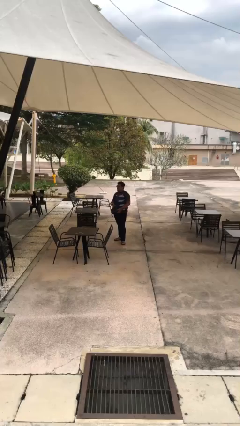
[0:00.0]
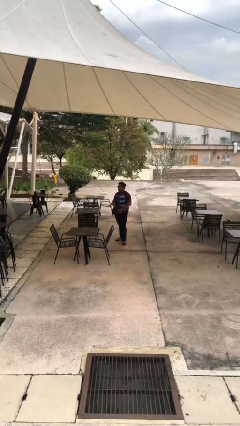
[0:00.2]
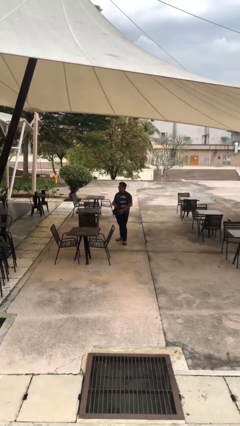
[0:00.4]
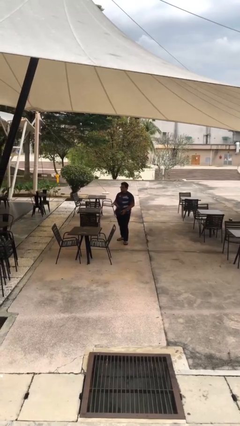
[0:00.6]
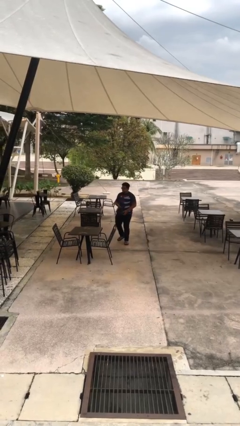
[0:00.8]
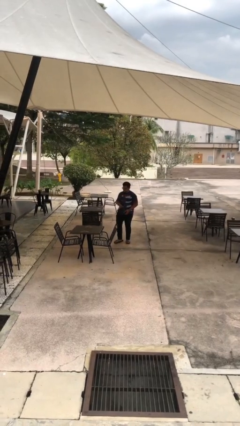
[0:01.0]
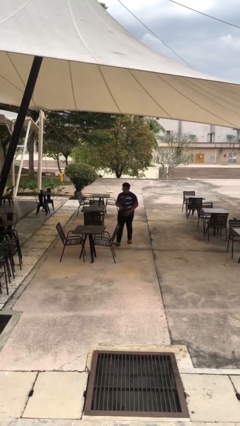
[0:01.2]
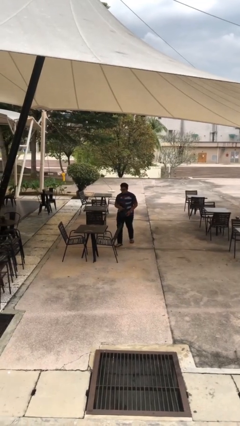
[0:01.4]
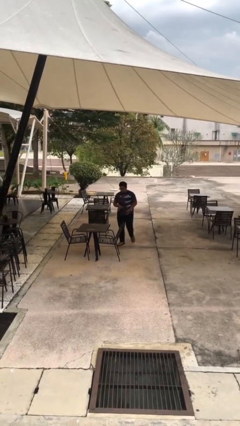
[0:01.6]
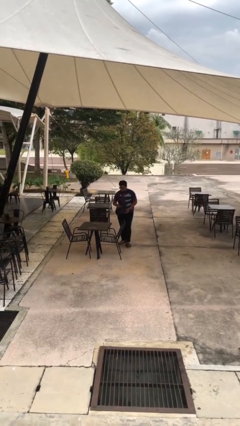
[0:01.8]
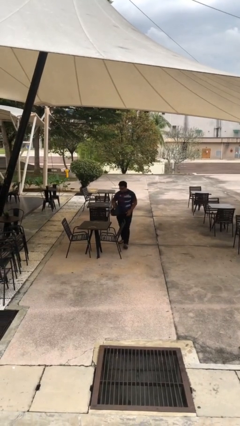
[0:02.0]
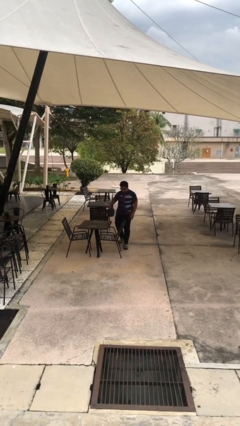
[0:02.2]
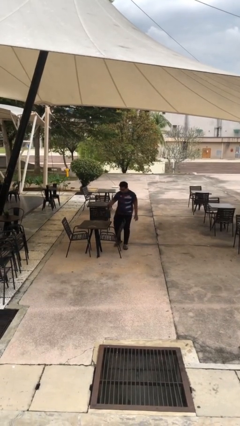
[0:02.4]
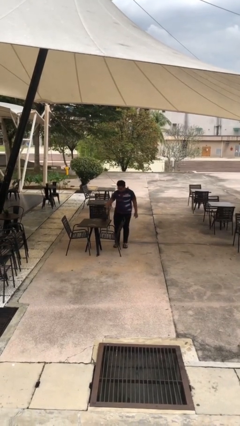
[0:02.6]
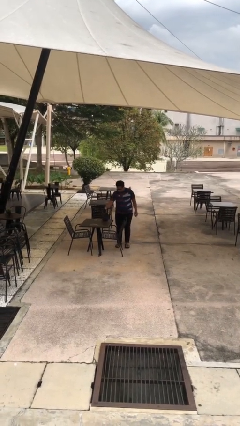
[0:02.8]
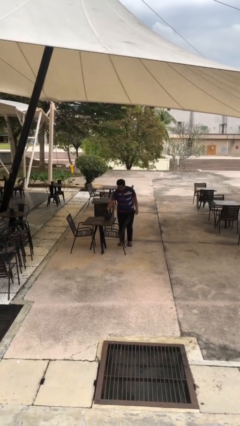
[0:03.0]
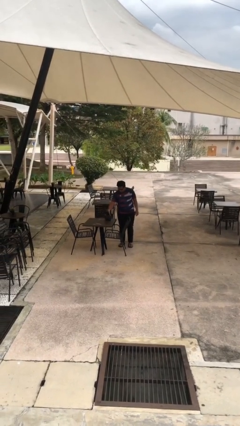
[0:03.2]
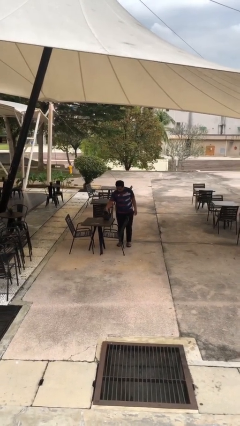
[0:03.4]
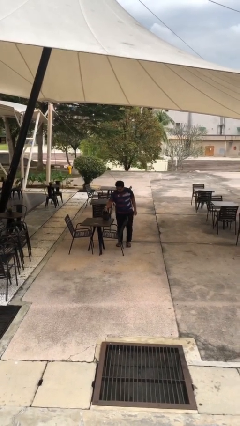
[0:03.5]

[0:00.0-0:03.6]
person puts down object on table

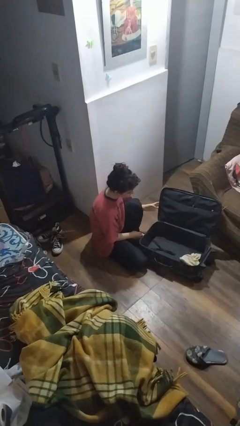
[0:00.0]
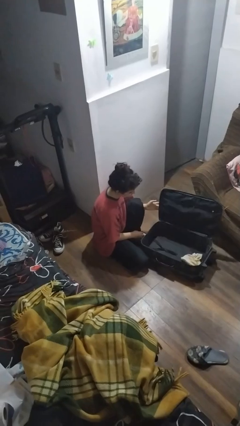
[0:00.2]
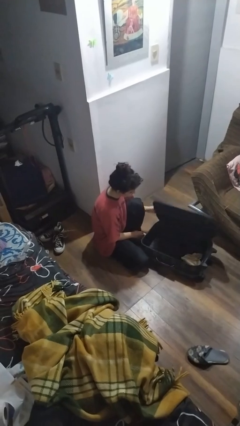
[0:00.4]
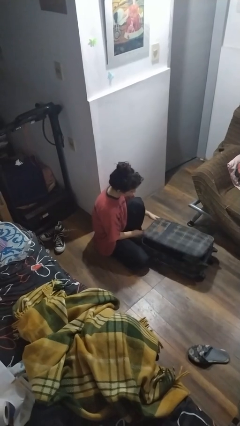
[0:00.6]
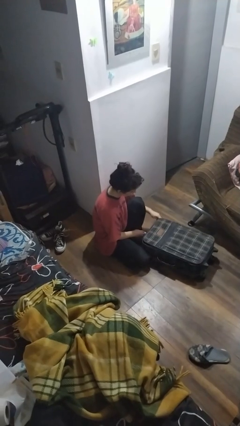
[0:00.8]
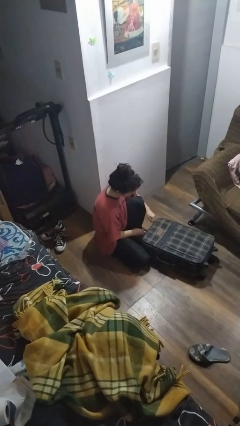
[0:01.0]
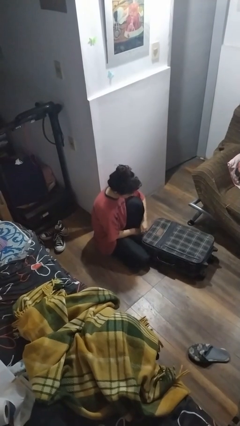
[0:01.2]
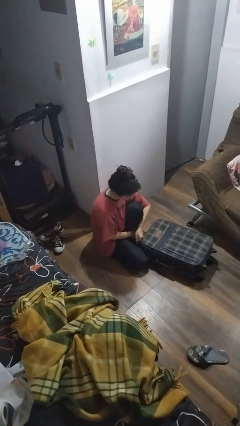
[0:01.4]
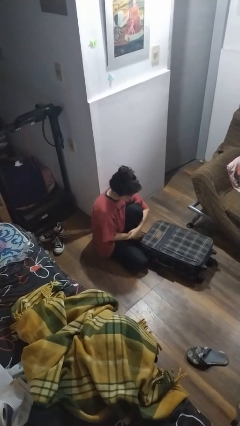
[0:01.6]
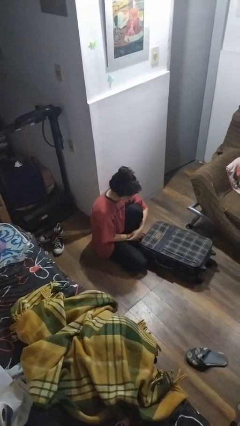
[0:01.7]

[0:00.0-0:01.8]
person closes suitcase

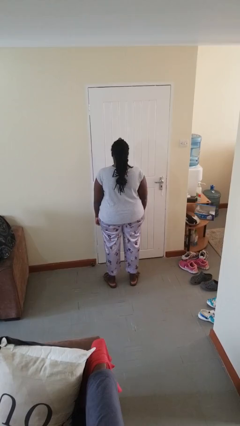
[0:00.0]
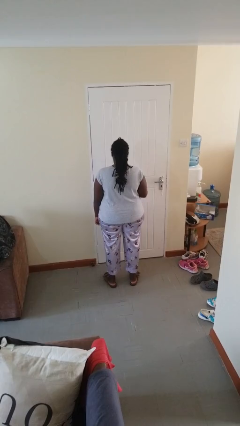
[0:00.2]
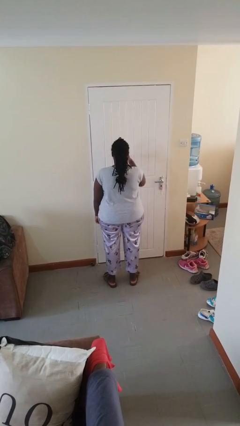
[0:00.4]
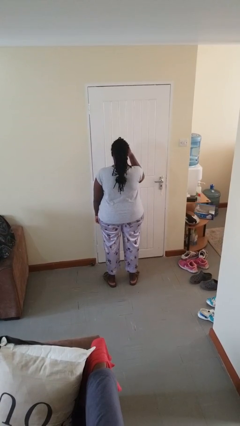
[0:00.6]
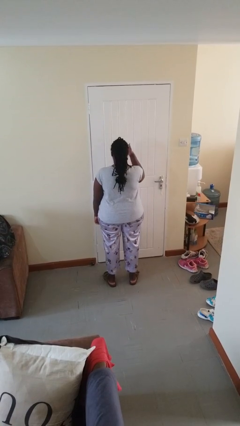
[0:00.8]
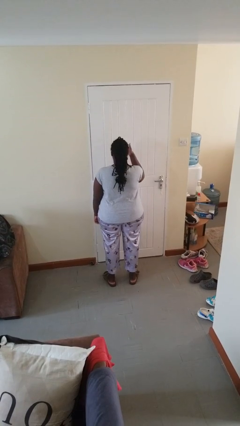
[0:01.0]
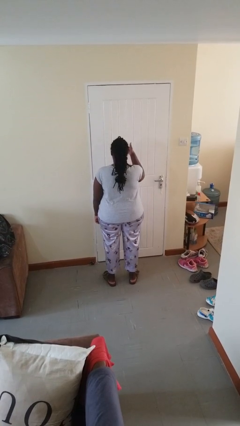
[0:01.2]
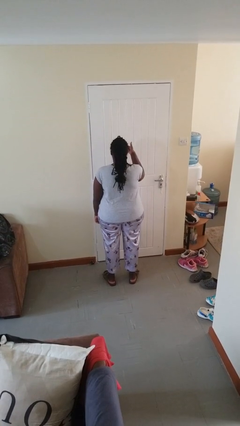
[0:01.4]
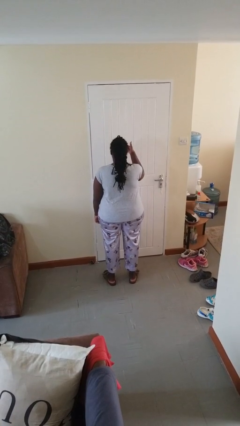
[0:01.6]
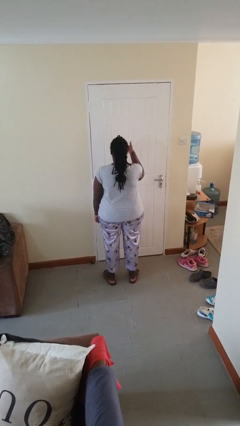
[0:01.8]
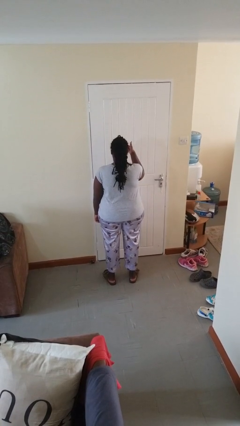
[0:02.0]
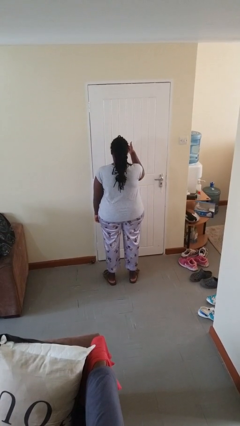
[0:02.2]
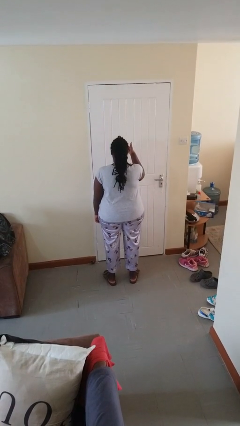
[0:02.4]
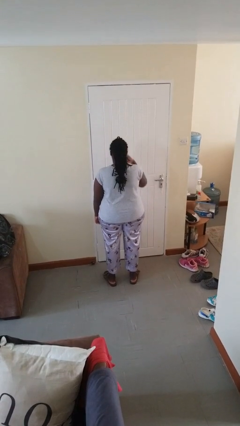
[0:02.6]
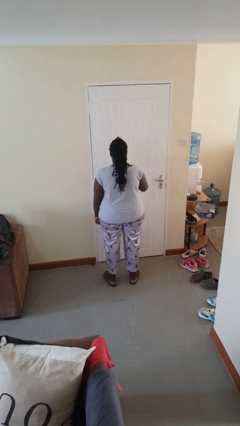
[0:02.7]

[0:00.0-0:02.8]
person gestures thumbs up

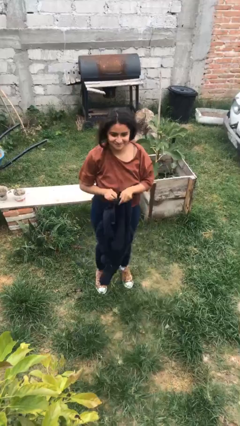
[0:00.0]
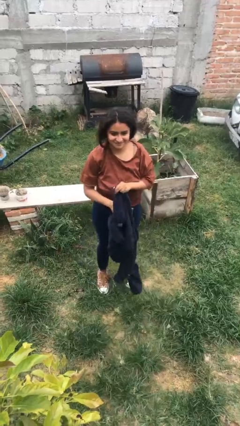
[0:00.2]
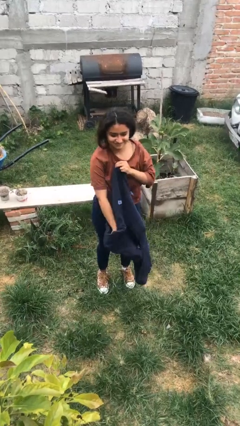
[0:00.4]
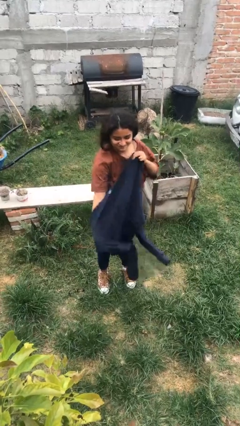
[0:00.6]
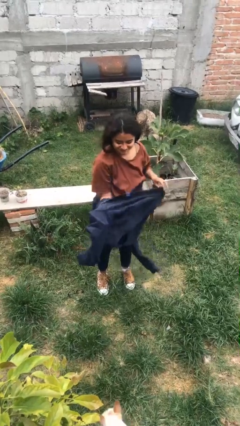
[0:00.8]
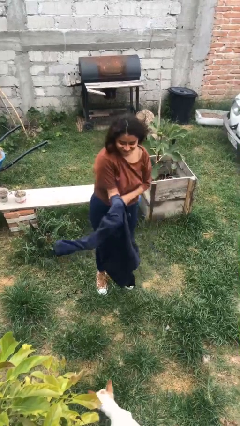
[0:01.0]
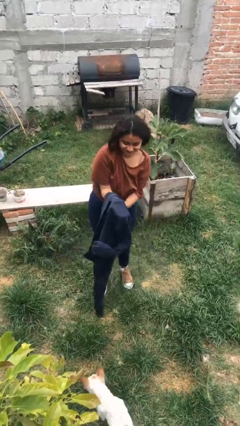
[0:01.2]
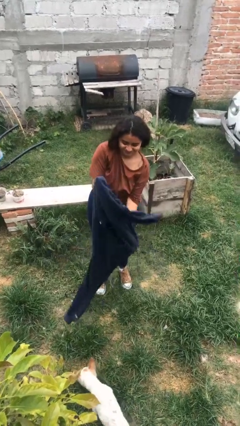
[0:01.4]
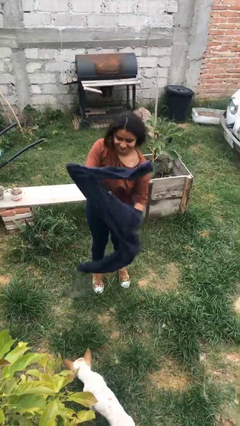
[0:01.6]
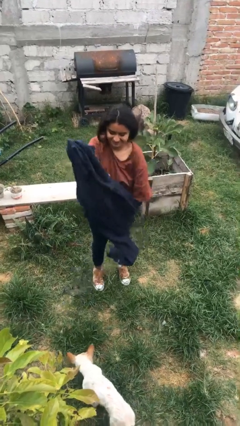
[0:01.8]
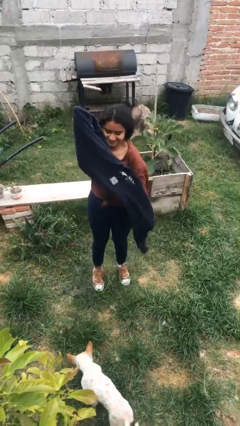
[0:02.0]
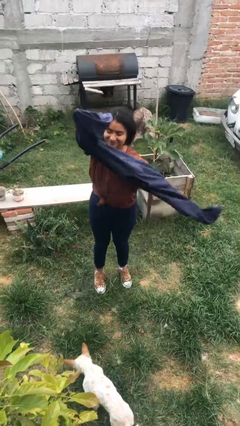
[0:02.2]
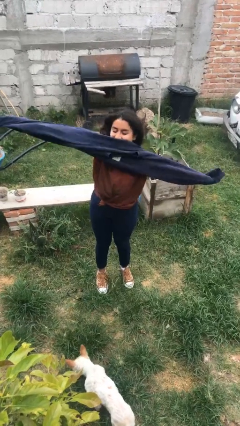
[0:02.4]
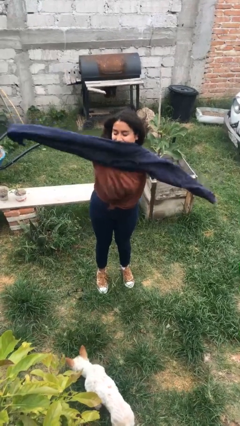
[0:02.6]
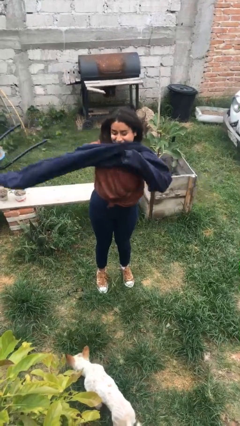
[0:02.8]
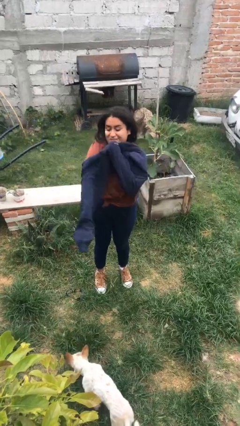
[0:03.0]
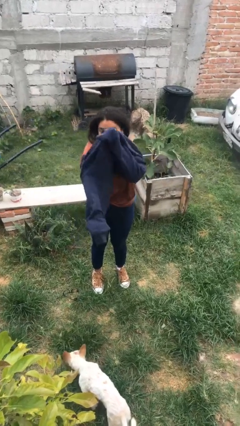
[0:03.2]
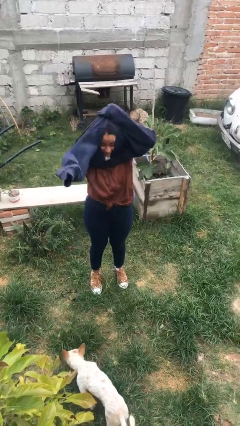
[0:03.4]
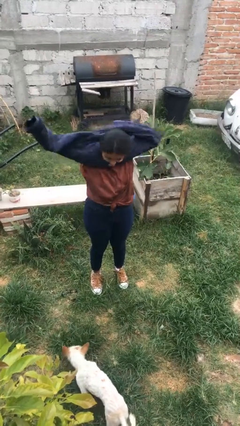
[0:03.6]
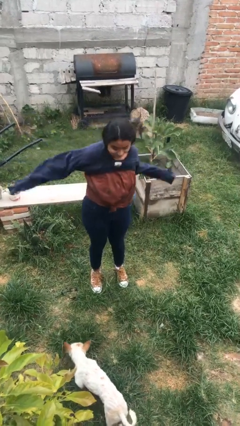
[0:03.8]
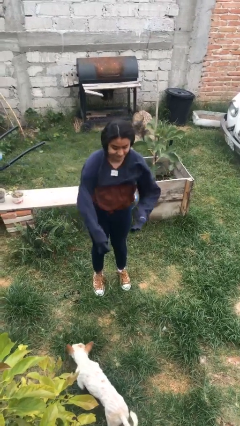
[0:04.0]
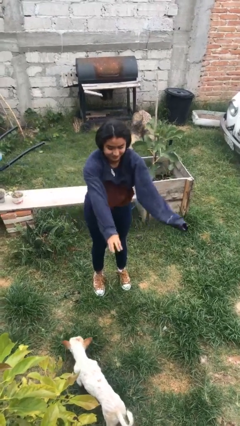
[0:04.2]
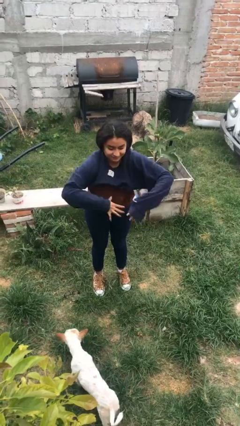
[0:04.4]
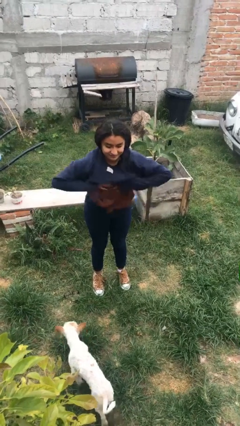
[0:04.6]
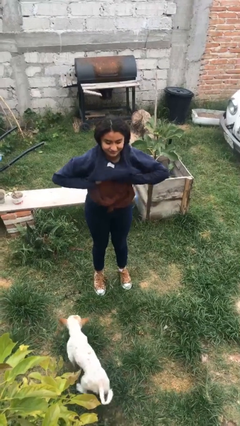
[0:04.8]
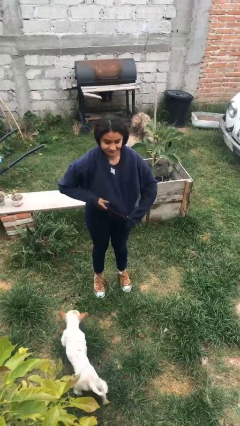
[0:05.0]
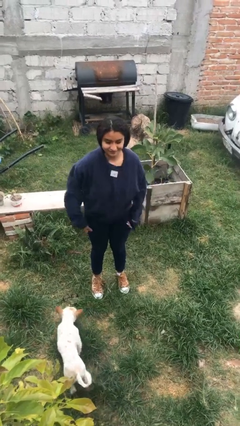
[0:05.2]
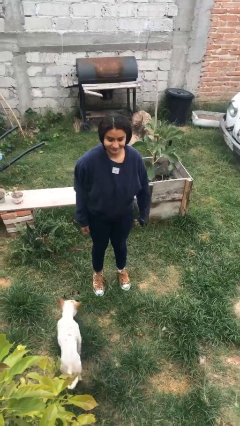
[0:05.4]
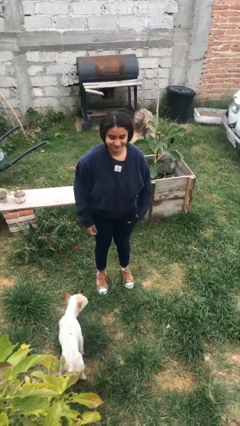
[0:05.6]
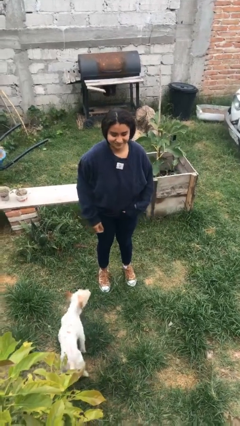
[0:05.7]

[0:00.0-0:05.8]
person puts on shirt

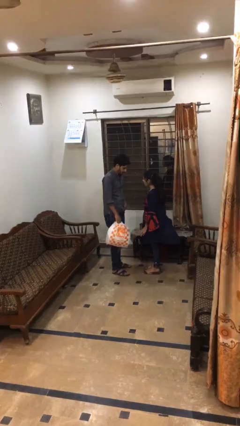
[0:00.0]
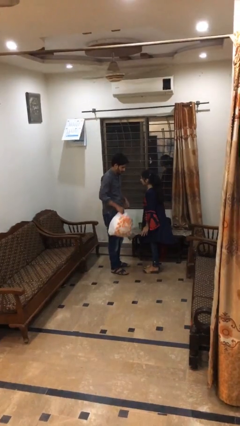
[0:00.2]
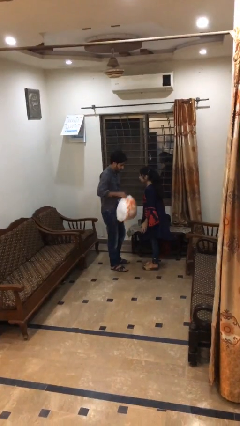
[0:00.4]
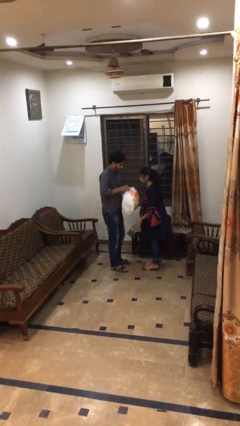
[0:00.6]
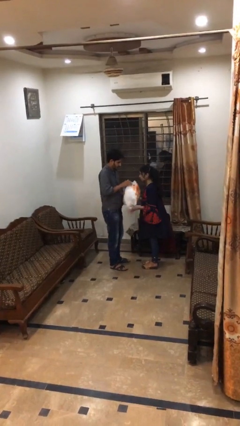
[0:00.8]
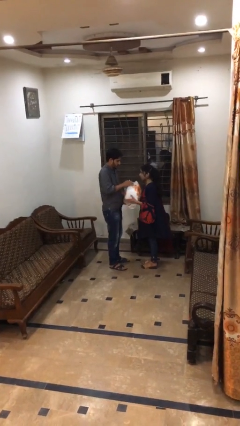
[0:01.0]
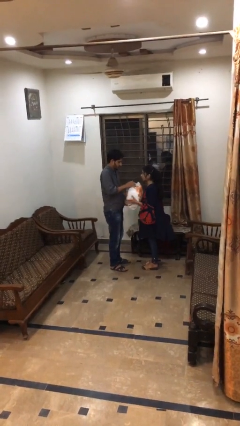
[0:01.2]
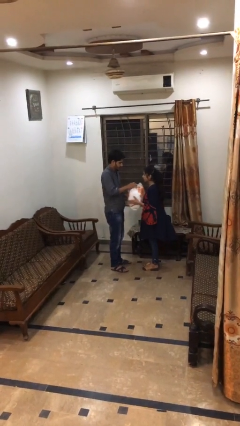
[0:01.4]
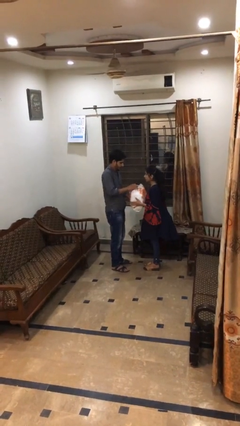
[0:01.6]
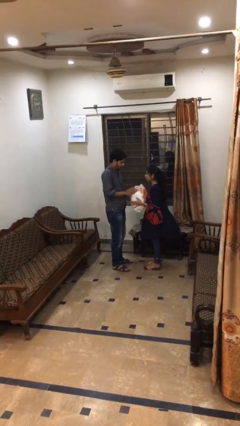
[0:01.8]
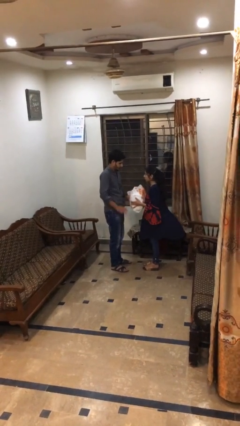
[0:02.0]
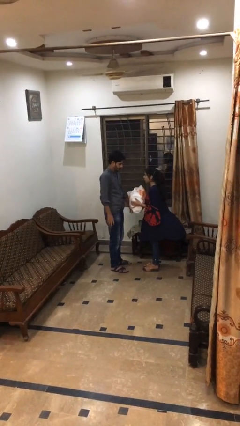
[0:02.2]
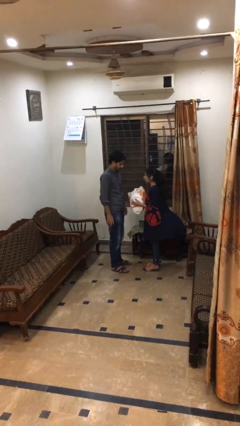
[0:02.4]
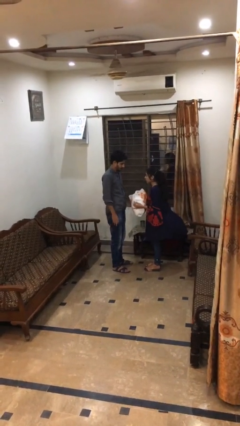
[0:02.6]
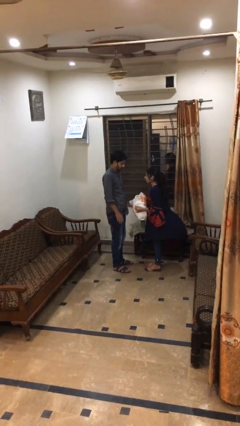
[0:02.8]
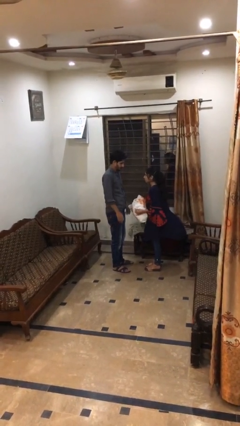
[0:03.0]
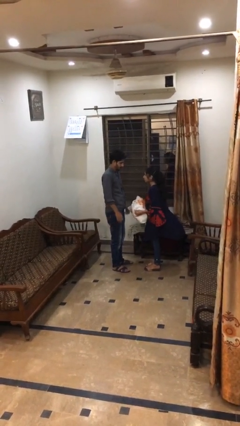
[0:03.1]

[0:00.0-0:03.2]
person transfers object to person

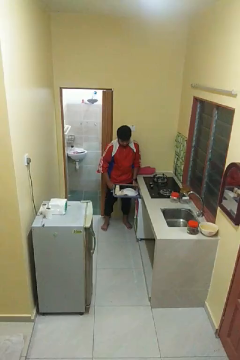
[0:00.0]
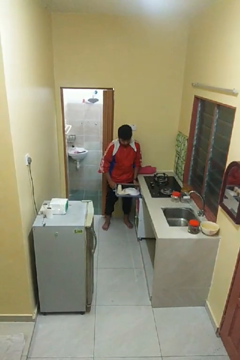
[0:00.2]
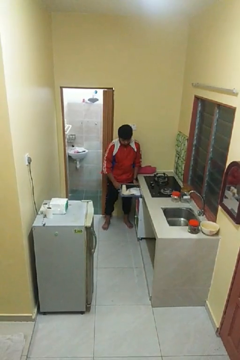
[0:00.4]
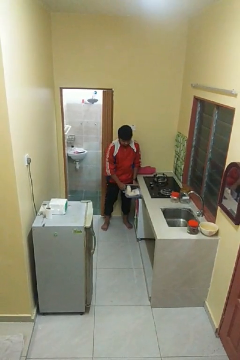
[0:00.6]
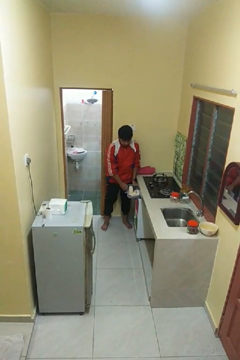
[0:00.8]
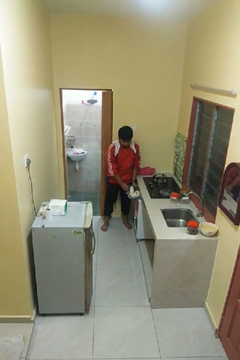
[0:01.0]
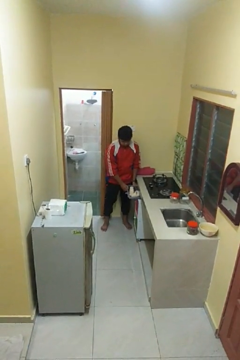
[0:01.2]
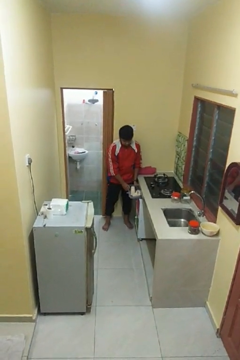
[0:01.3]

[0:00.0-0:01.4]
person closes kitchen drawer
